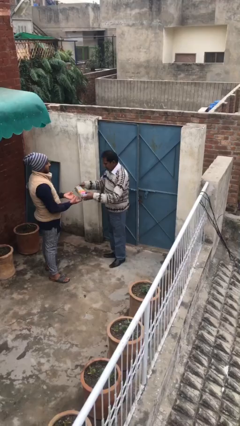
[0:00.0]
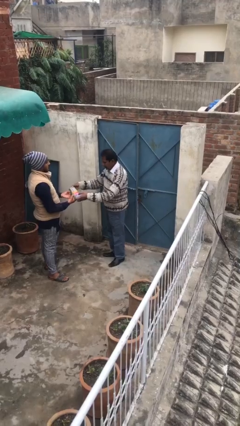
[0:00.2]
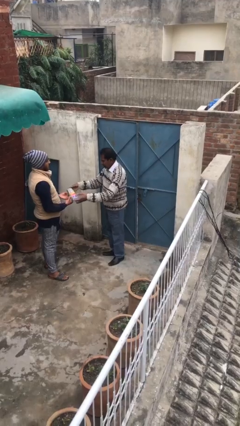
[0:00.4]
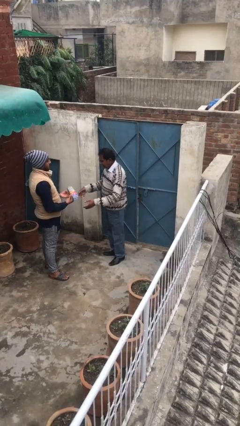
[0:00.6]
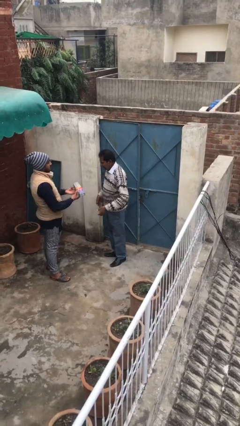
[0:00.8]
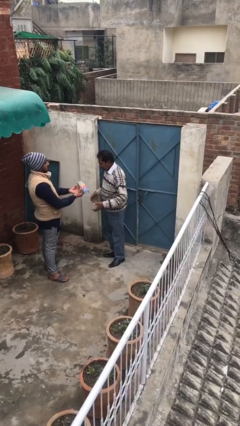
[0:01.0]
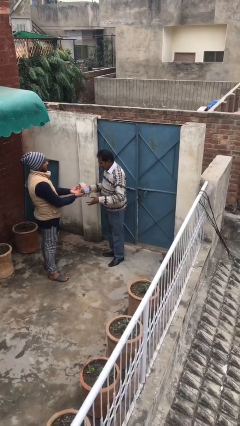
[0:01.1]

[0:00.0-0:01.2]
person transfers object to person

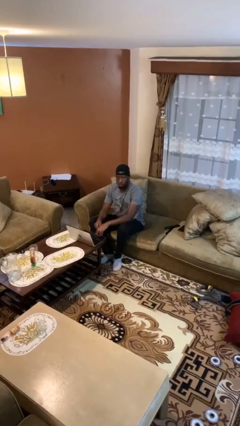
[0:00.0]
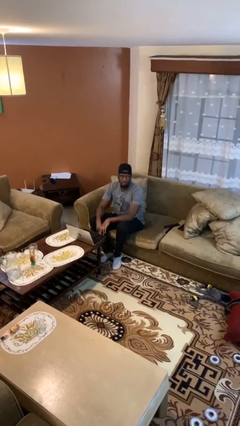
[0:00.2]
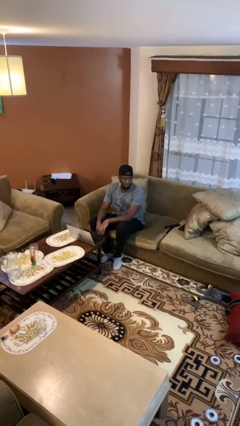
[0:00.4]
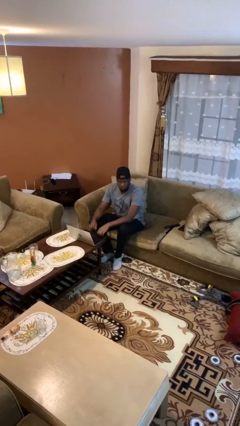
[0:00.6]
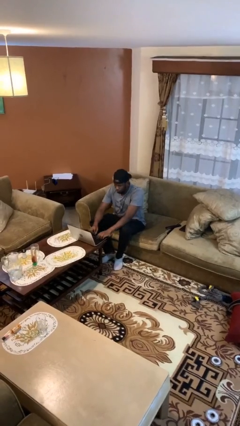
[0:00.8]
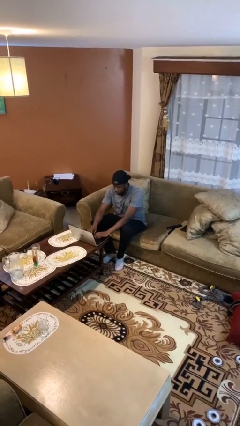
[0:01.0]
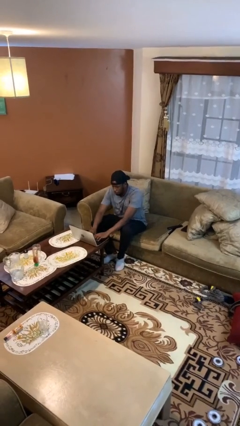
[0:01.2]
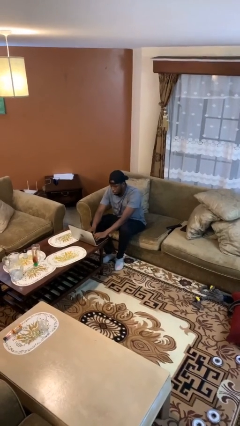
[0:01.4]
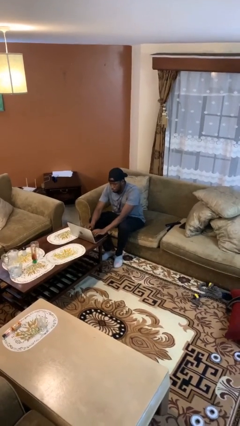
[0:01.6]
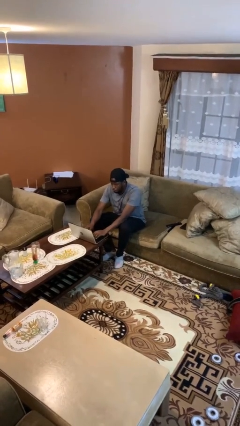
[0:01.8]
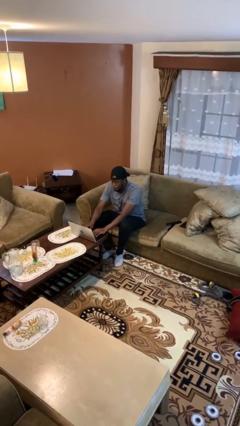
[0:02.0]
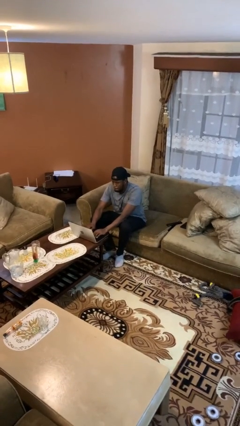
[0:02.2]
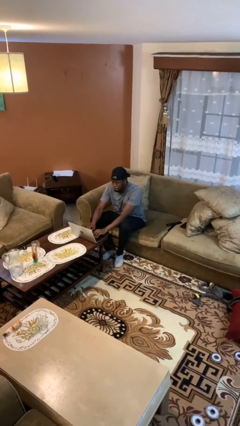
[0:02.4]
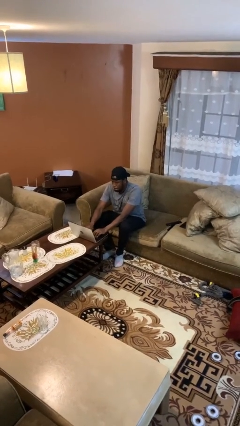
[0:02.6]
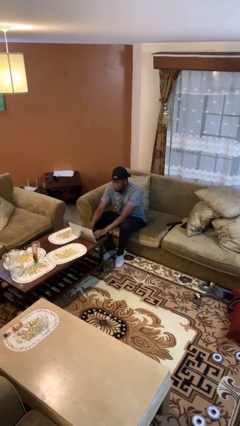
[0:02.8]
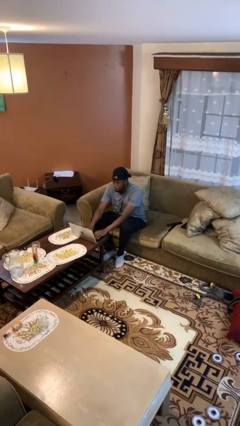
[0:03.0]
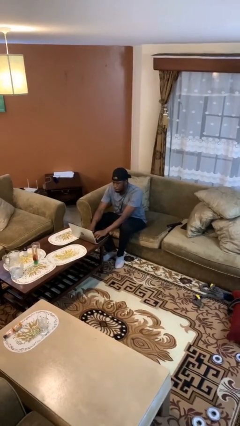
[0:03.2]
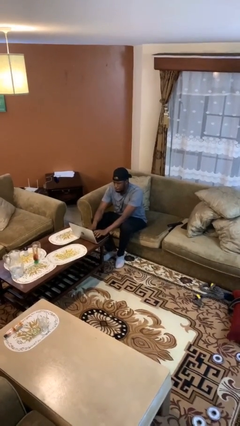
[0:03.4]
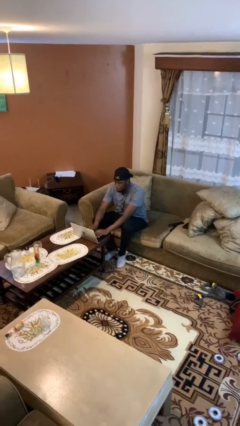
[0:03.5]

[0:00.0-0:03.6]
person interacts with laptop

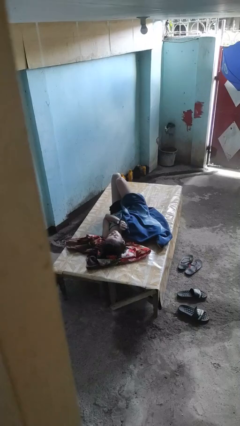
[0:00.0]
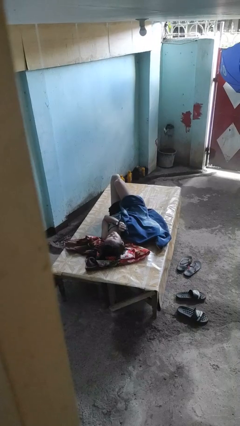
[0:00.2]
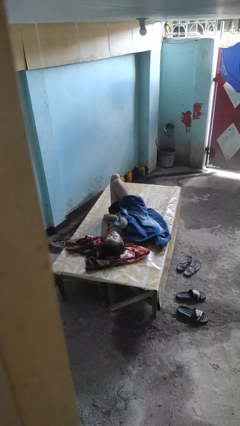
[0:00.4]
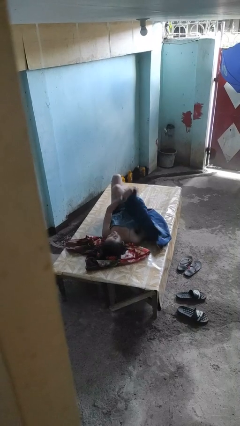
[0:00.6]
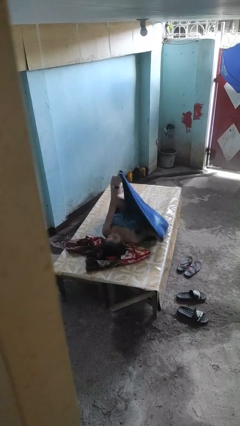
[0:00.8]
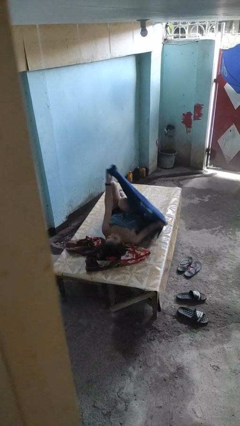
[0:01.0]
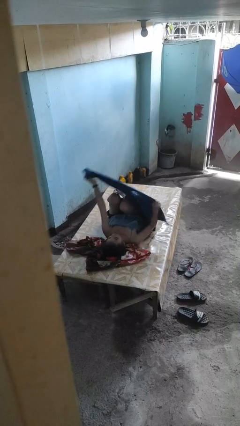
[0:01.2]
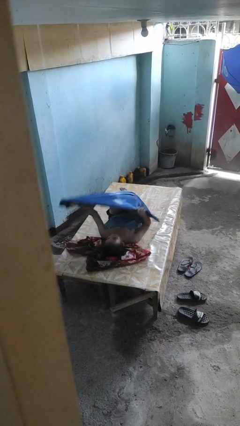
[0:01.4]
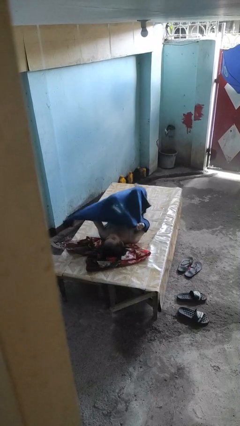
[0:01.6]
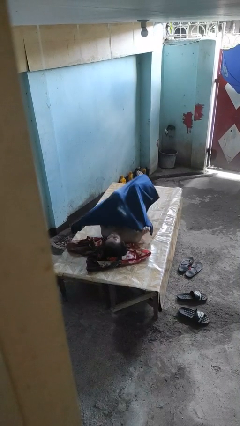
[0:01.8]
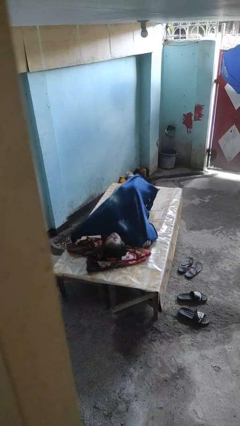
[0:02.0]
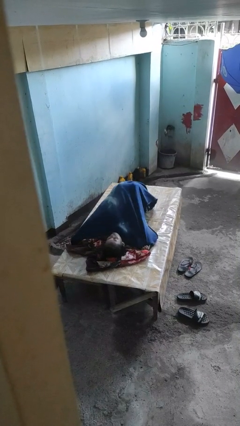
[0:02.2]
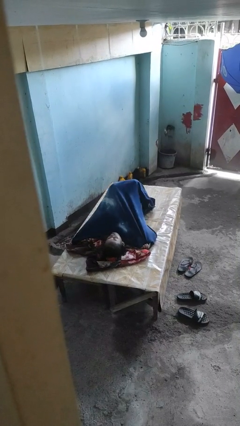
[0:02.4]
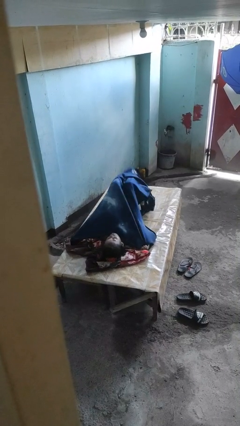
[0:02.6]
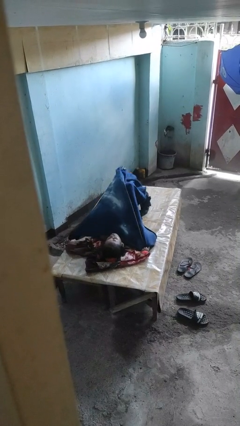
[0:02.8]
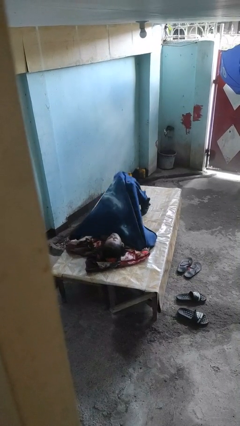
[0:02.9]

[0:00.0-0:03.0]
person covers with bedsheets

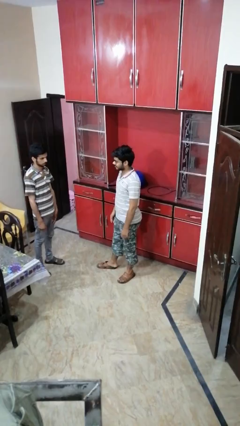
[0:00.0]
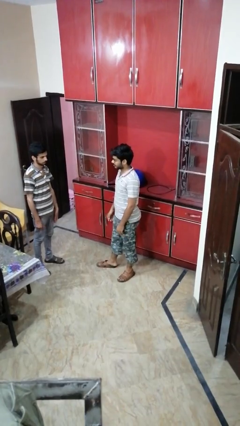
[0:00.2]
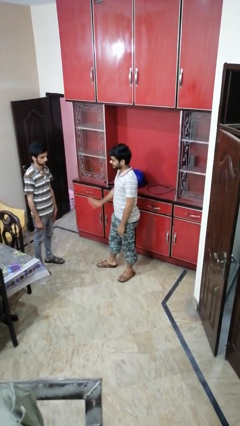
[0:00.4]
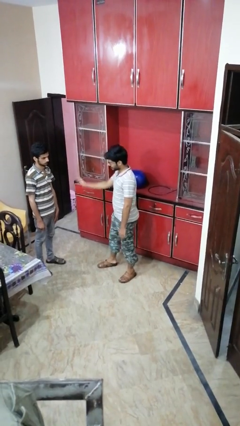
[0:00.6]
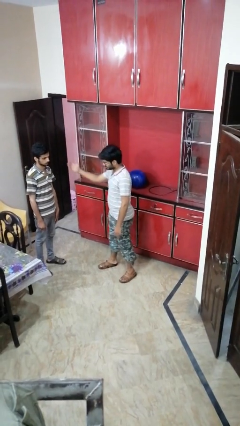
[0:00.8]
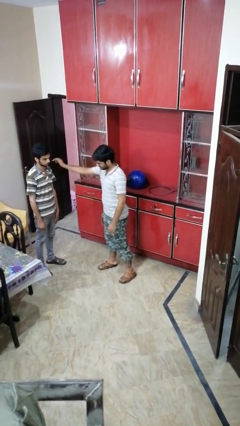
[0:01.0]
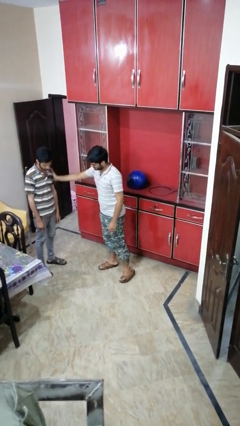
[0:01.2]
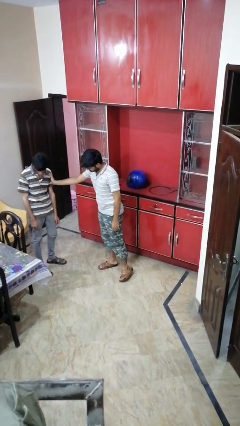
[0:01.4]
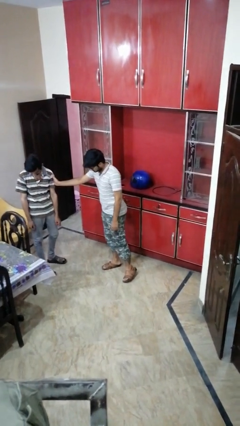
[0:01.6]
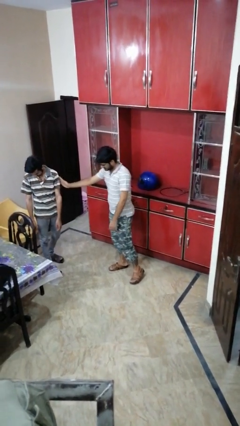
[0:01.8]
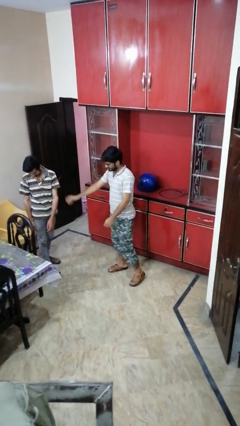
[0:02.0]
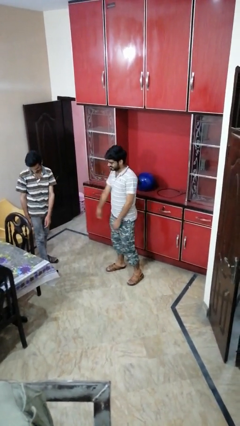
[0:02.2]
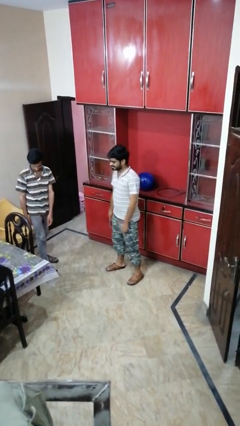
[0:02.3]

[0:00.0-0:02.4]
person shoves person

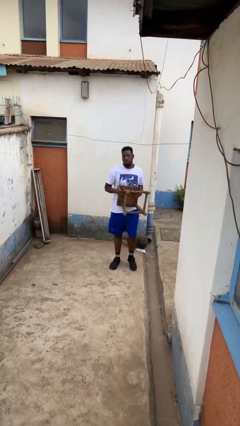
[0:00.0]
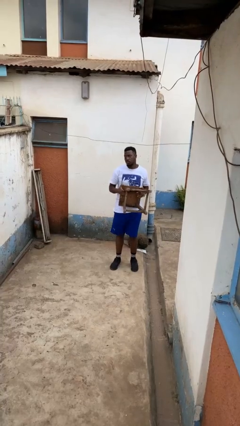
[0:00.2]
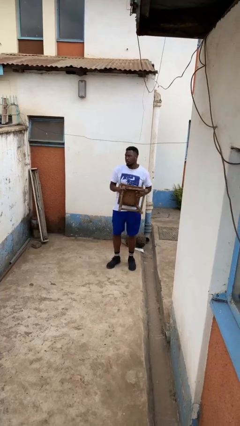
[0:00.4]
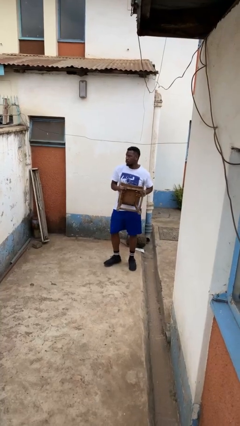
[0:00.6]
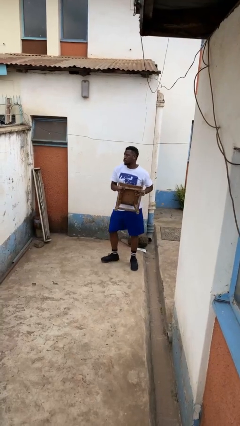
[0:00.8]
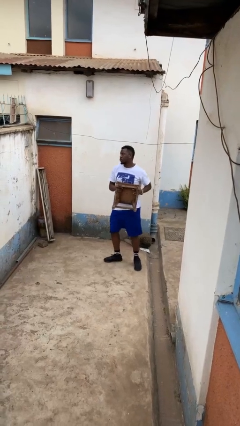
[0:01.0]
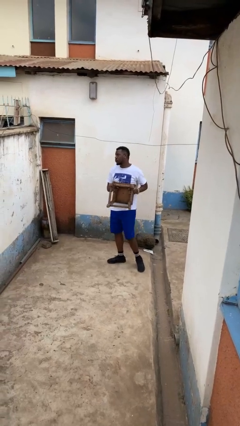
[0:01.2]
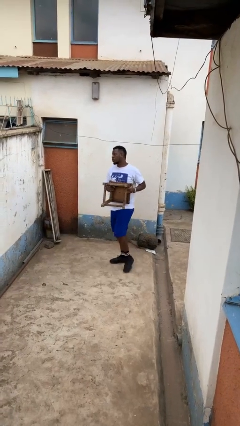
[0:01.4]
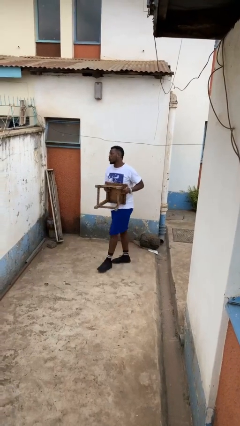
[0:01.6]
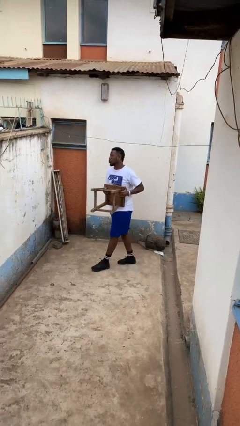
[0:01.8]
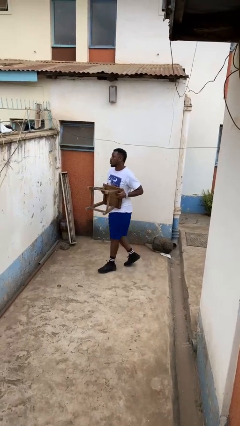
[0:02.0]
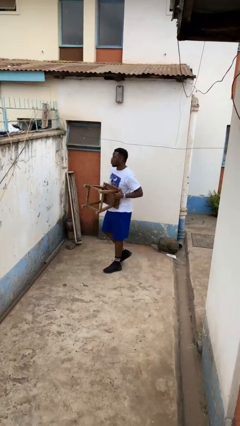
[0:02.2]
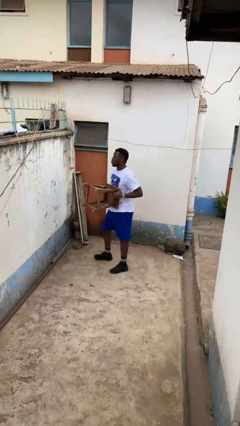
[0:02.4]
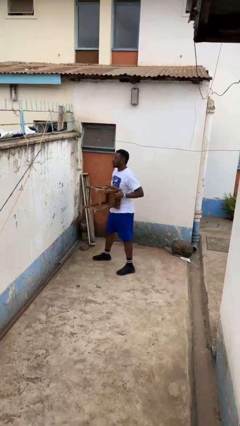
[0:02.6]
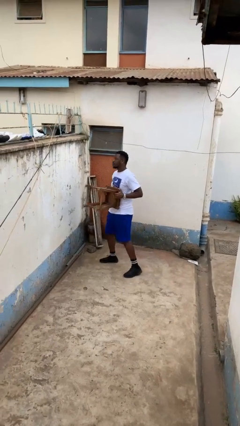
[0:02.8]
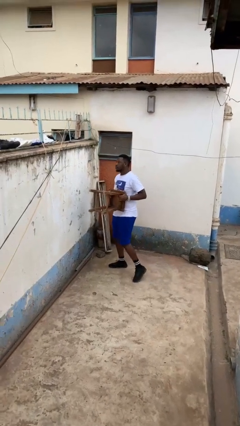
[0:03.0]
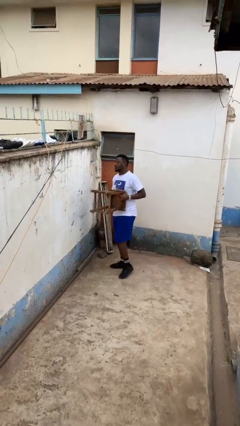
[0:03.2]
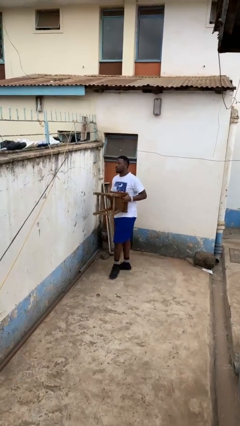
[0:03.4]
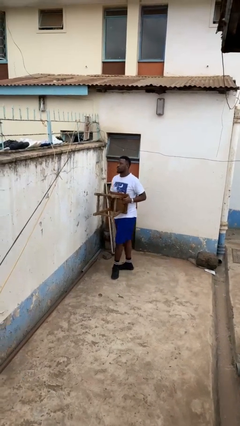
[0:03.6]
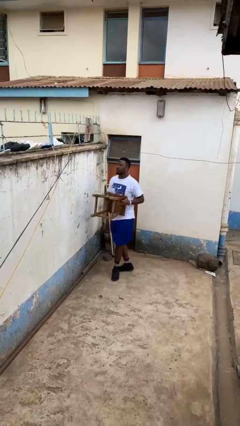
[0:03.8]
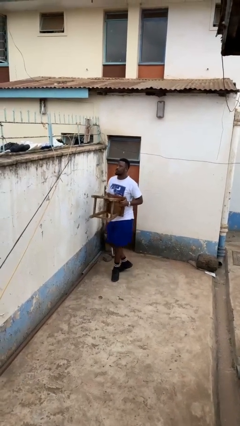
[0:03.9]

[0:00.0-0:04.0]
person carries furniture

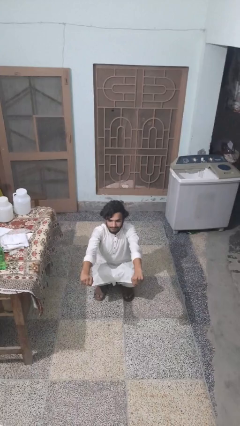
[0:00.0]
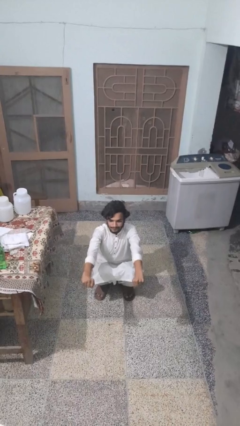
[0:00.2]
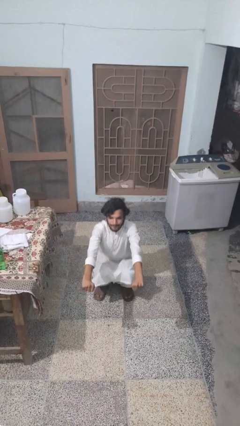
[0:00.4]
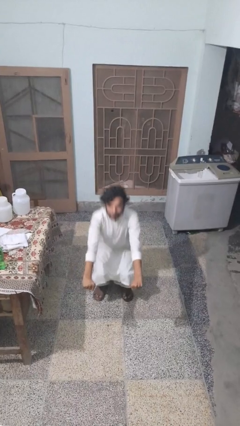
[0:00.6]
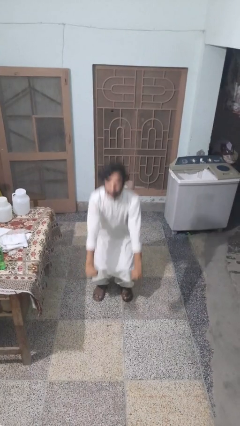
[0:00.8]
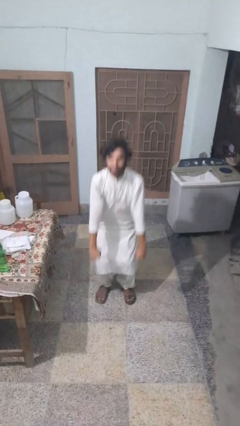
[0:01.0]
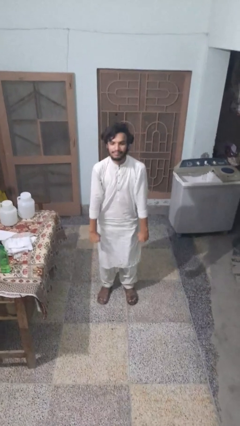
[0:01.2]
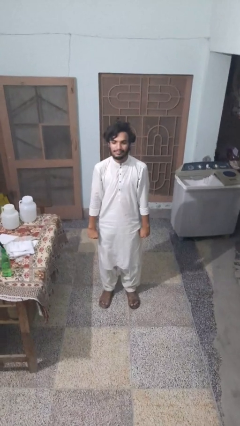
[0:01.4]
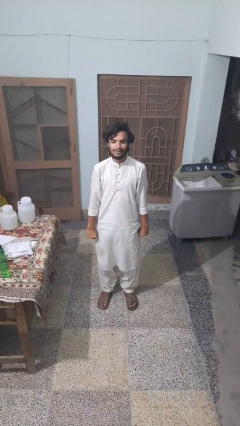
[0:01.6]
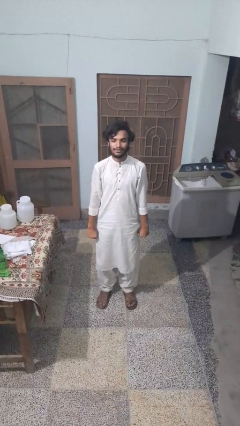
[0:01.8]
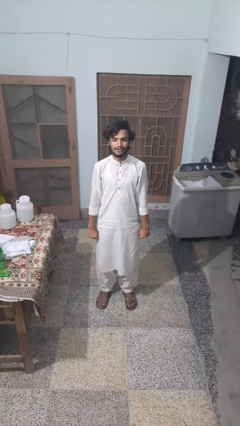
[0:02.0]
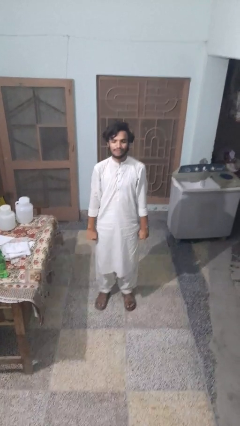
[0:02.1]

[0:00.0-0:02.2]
person stands up

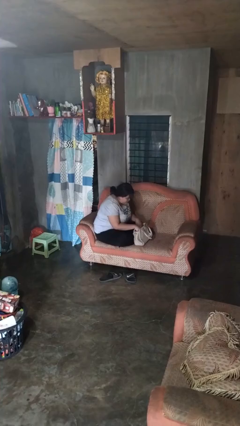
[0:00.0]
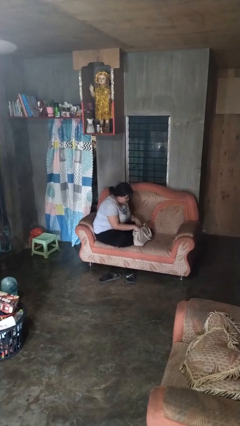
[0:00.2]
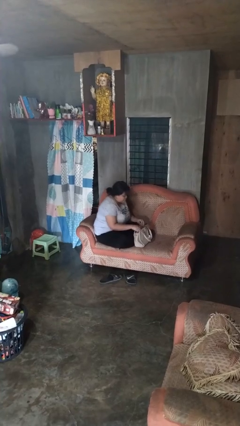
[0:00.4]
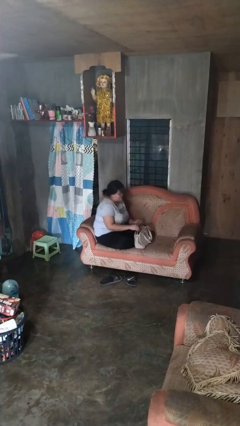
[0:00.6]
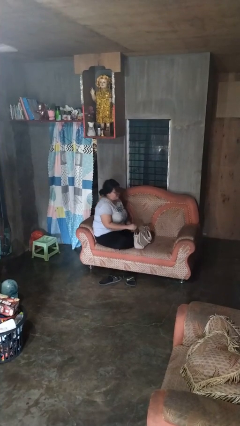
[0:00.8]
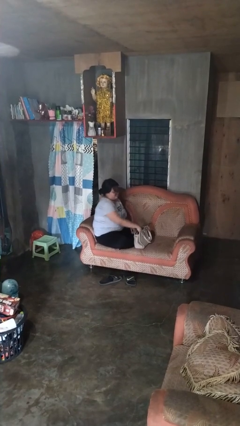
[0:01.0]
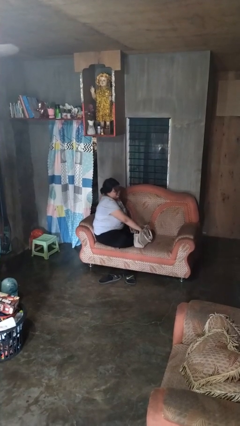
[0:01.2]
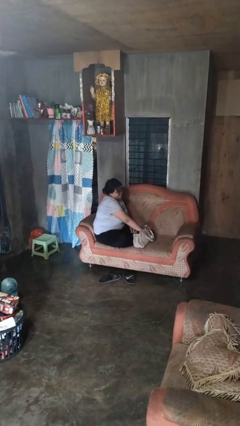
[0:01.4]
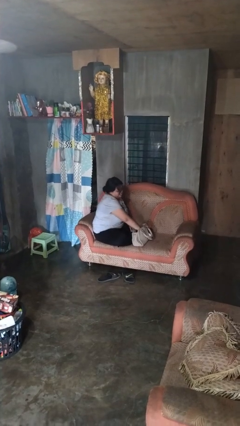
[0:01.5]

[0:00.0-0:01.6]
person takes object from purse
